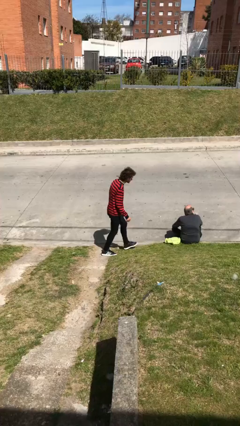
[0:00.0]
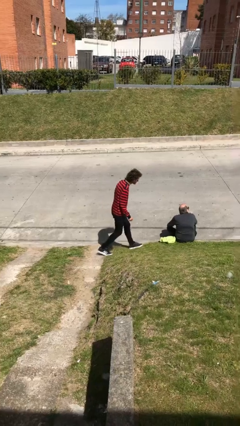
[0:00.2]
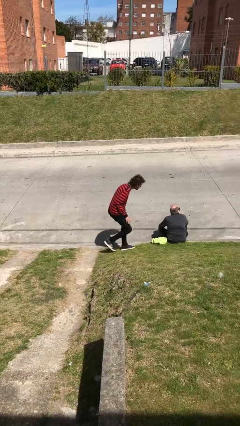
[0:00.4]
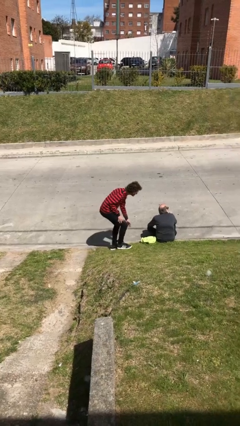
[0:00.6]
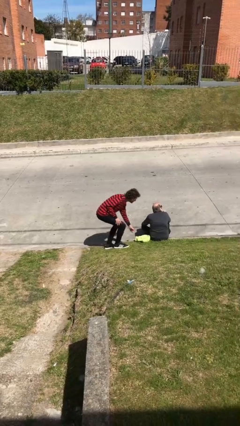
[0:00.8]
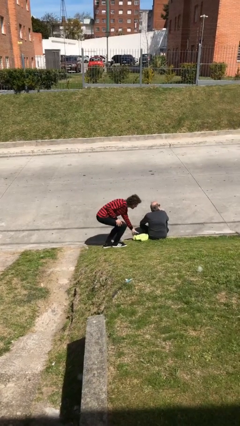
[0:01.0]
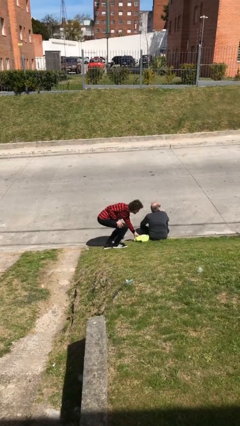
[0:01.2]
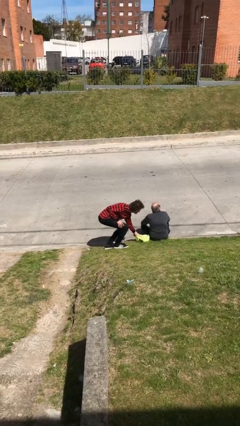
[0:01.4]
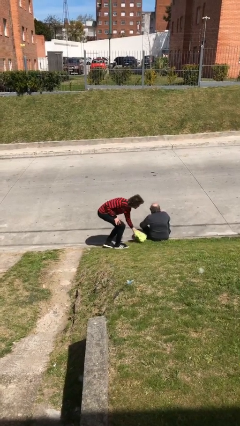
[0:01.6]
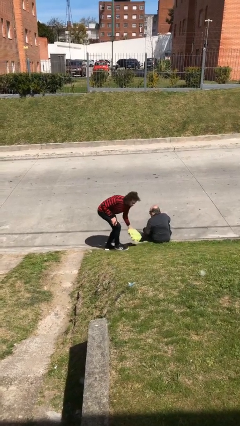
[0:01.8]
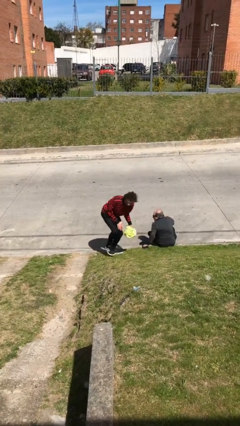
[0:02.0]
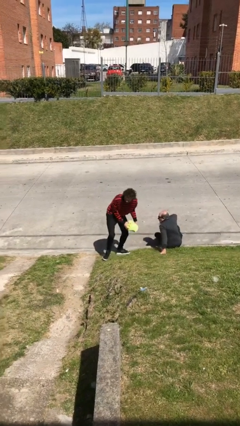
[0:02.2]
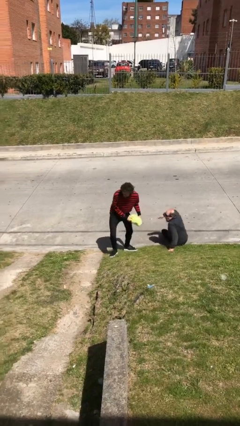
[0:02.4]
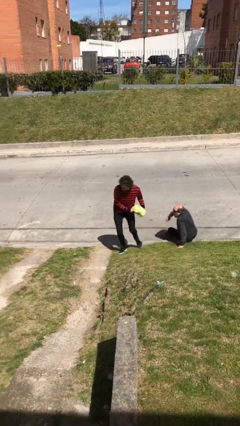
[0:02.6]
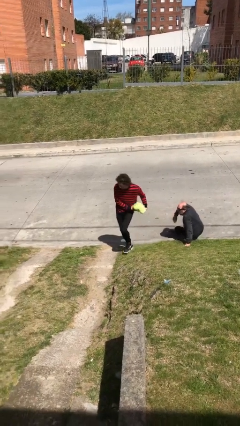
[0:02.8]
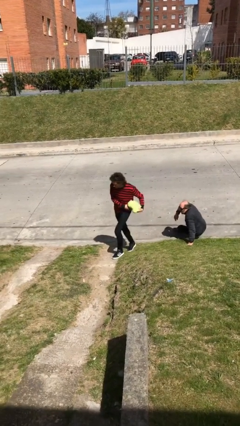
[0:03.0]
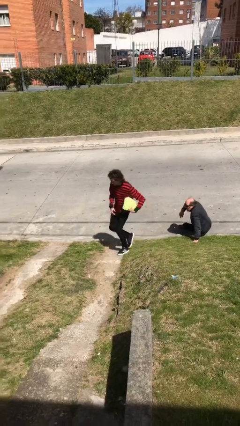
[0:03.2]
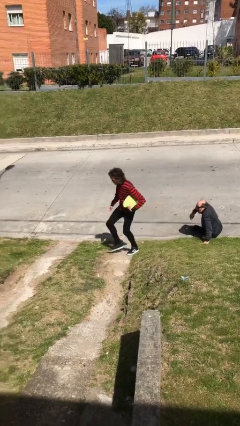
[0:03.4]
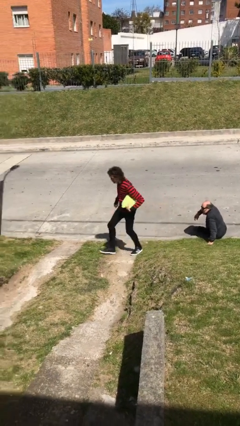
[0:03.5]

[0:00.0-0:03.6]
person steals object from person

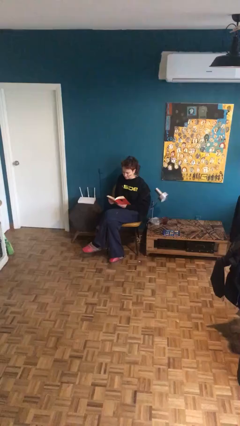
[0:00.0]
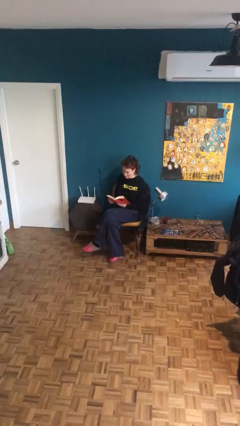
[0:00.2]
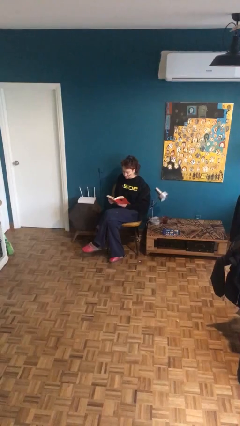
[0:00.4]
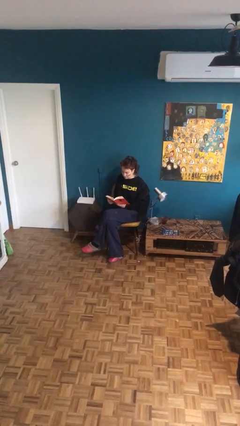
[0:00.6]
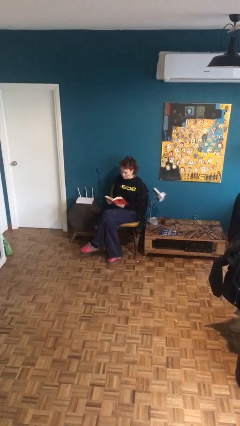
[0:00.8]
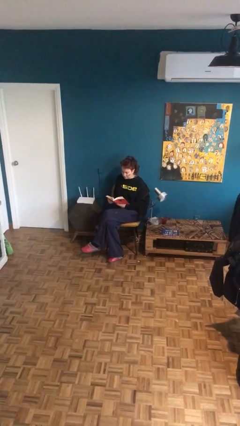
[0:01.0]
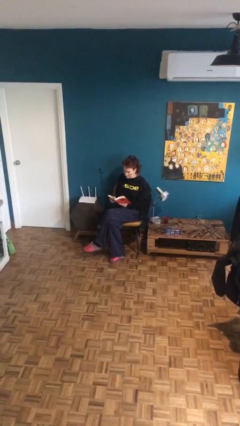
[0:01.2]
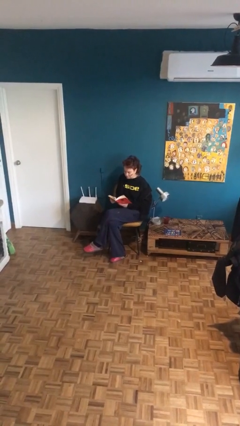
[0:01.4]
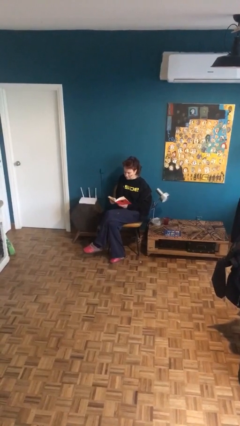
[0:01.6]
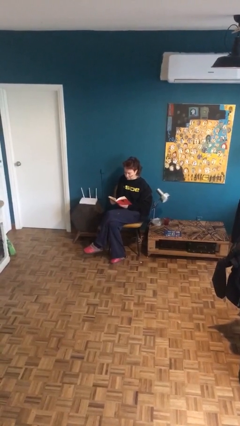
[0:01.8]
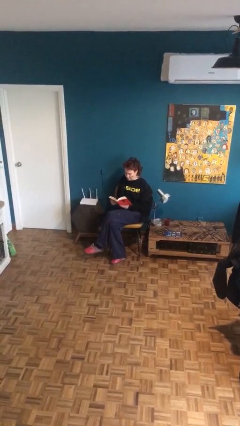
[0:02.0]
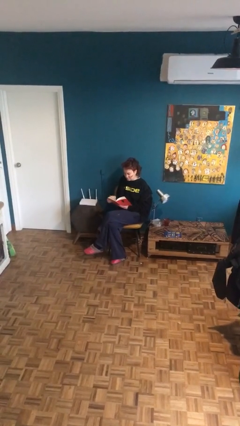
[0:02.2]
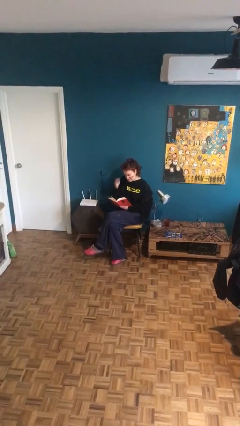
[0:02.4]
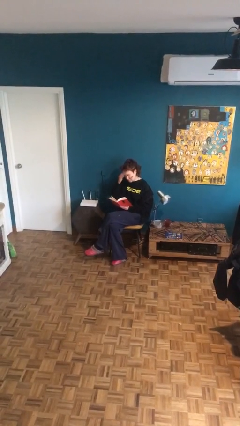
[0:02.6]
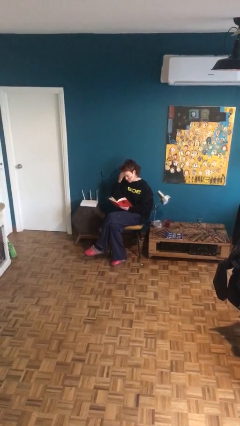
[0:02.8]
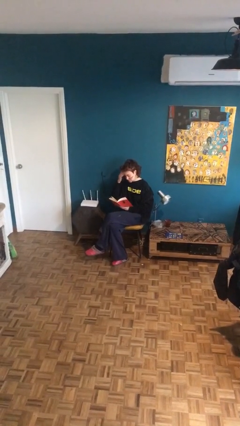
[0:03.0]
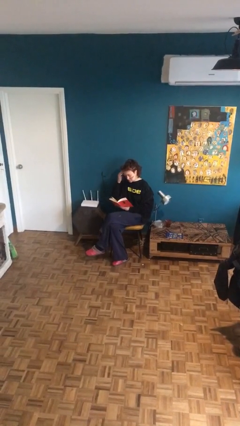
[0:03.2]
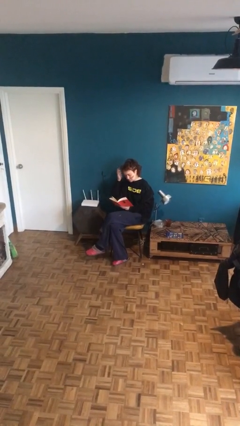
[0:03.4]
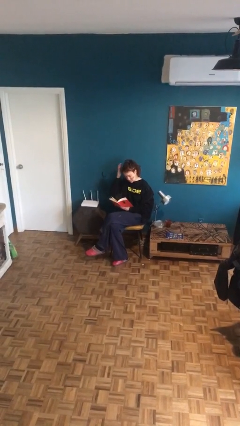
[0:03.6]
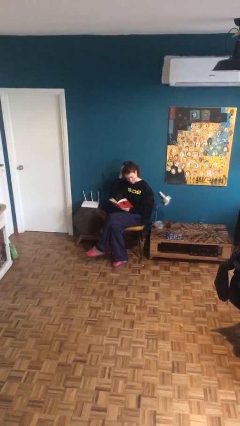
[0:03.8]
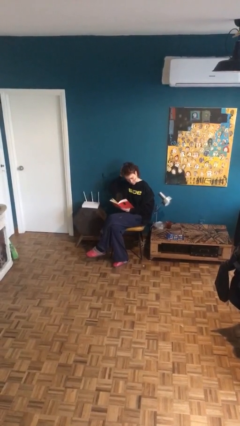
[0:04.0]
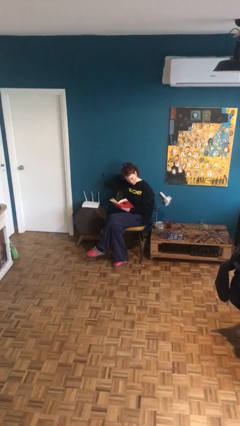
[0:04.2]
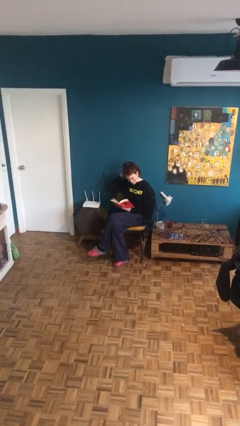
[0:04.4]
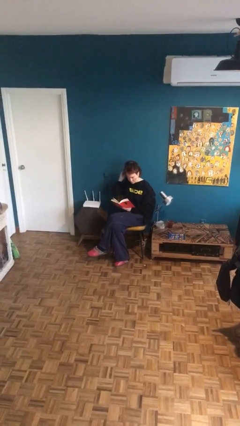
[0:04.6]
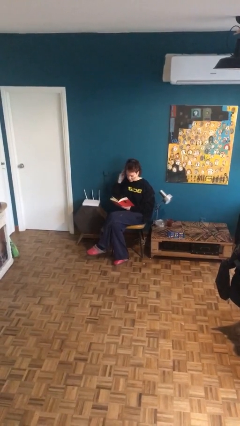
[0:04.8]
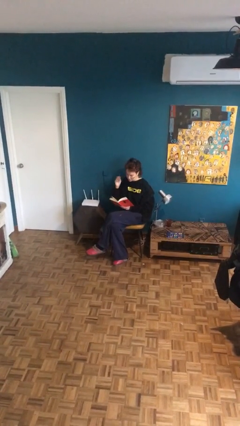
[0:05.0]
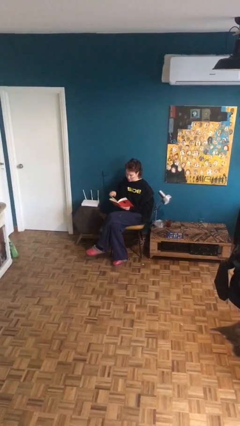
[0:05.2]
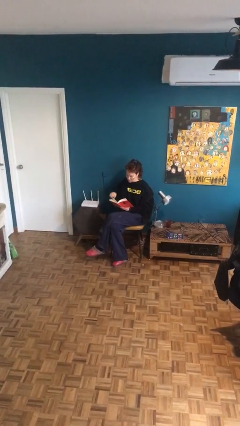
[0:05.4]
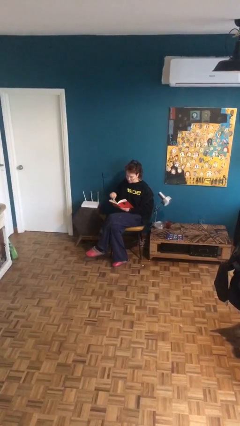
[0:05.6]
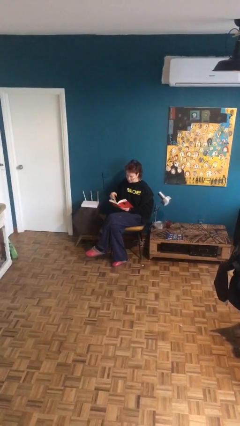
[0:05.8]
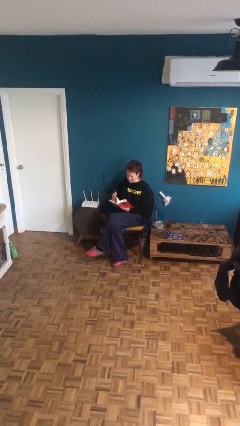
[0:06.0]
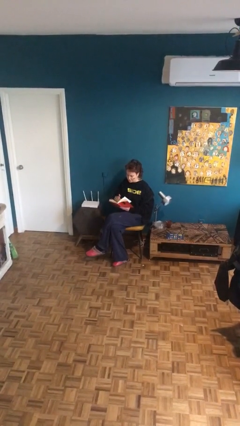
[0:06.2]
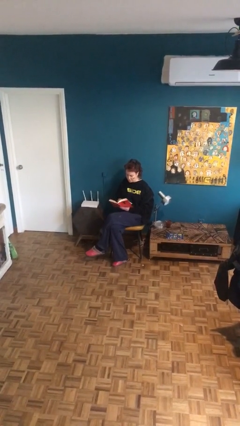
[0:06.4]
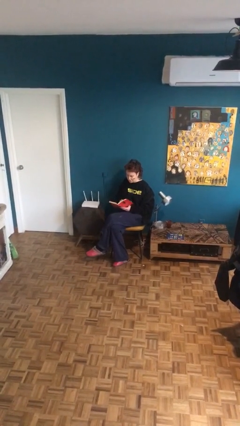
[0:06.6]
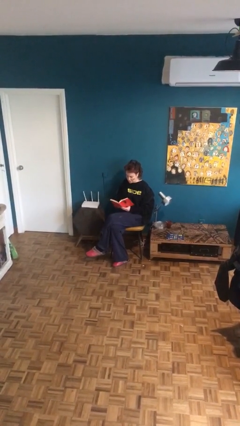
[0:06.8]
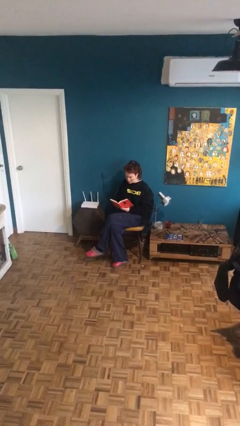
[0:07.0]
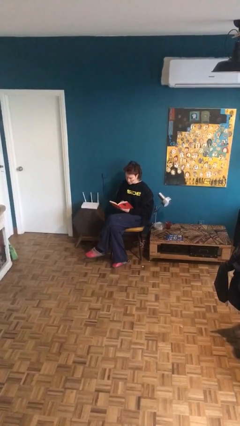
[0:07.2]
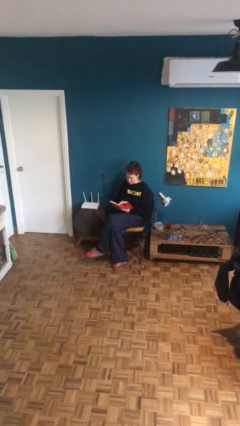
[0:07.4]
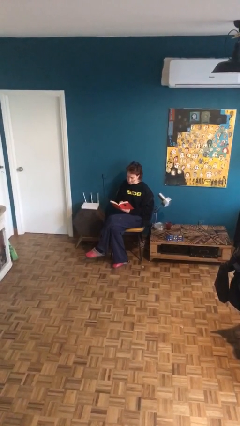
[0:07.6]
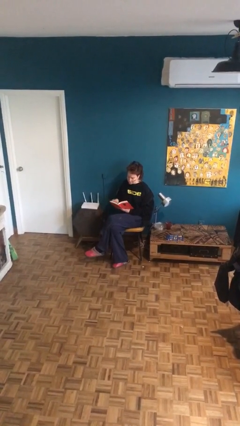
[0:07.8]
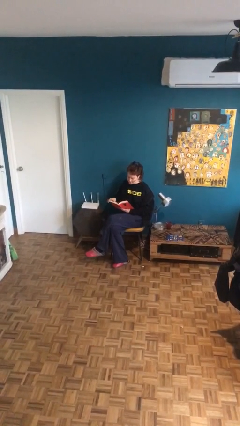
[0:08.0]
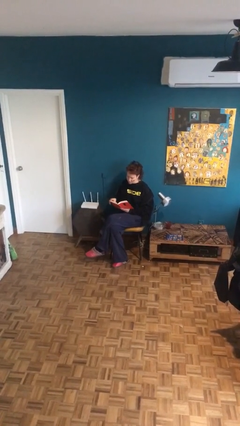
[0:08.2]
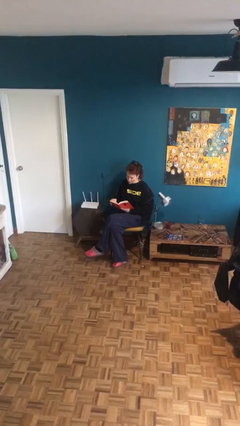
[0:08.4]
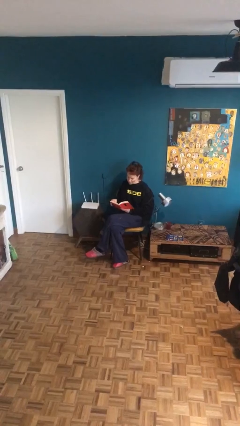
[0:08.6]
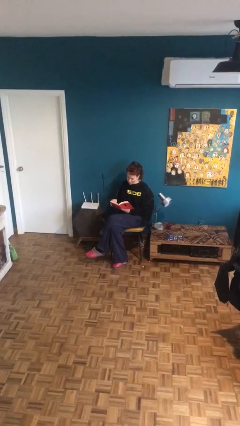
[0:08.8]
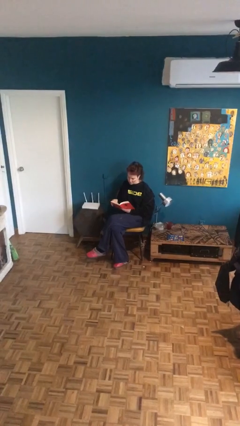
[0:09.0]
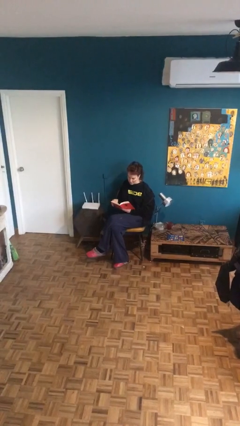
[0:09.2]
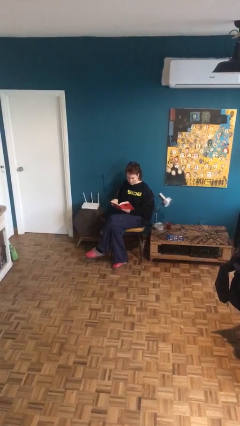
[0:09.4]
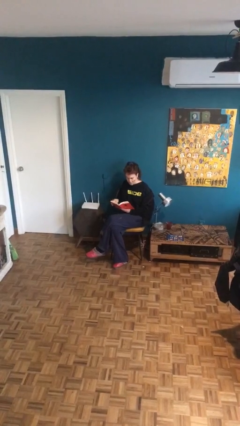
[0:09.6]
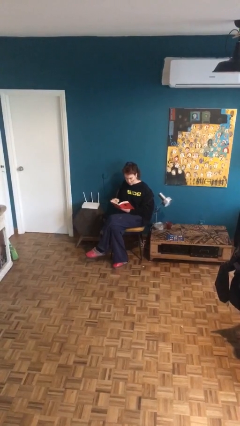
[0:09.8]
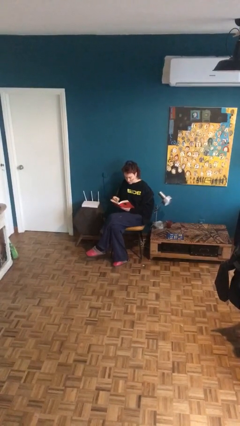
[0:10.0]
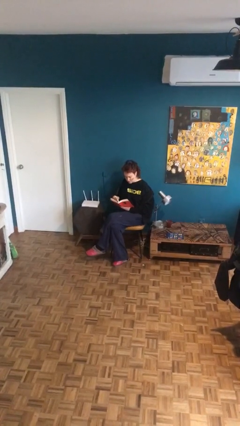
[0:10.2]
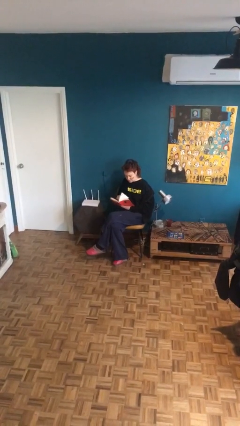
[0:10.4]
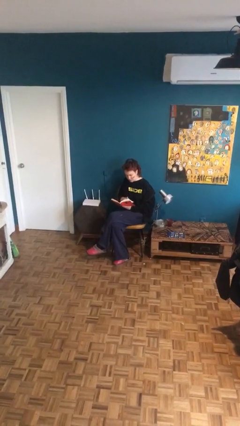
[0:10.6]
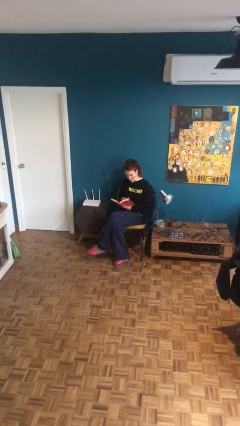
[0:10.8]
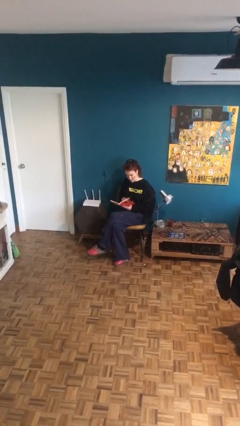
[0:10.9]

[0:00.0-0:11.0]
person reads document

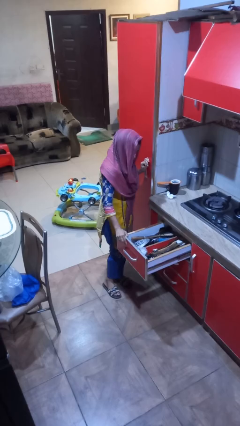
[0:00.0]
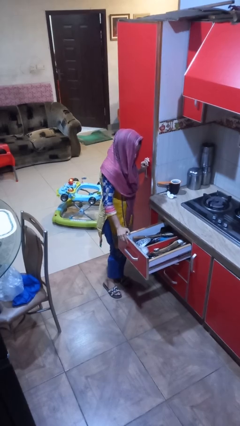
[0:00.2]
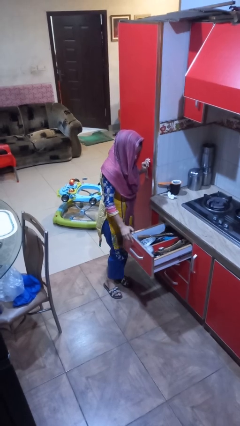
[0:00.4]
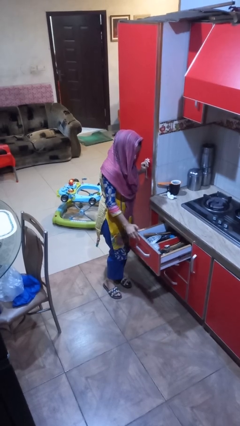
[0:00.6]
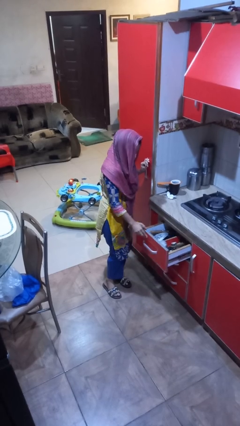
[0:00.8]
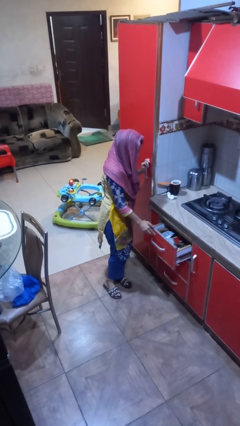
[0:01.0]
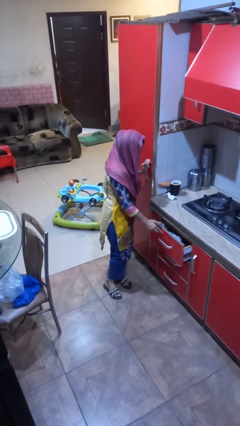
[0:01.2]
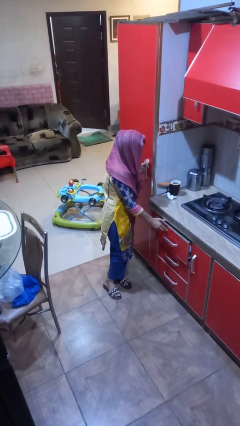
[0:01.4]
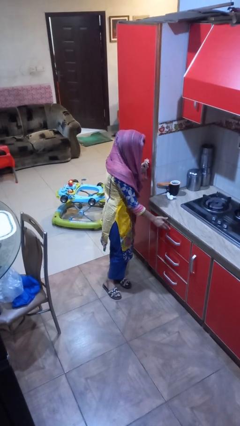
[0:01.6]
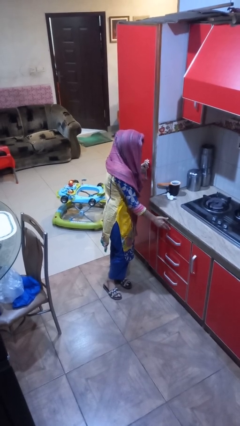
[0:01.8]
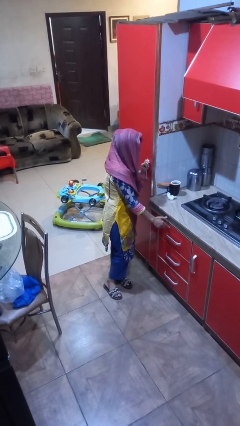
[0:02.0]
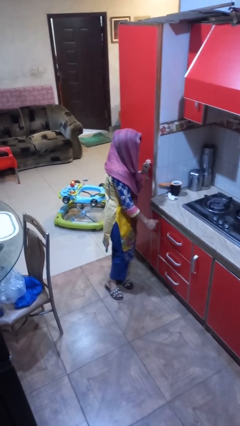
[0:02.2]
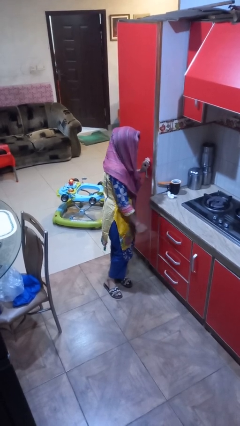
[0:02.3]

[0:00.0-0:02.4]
person closes kitchen drawer

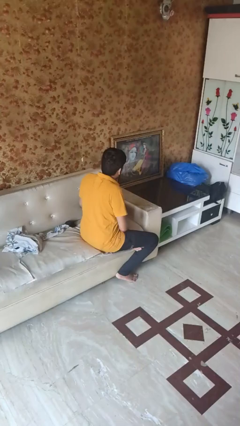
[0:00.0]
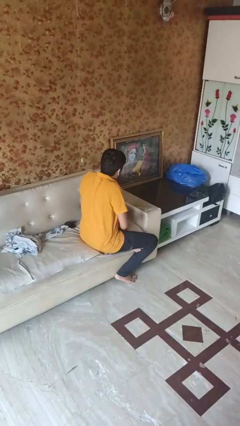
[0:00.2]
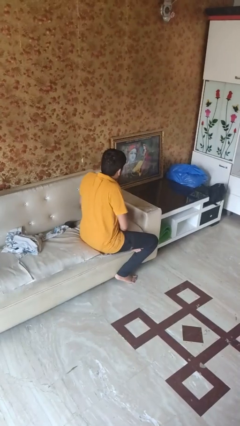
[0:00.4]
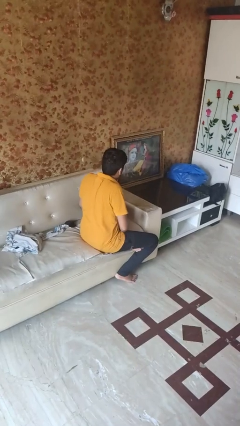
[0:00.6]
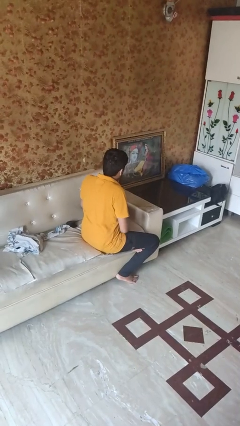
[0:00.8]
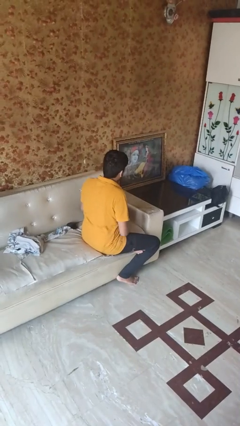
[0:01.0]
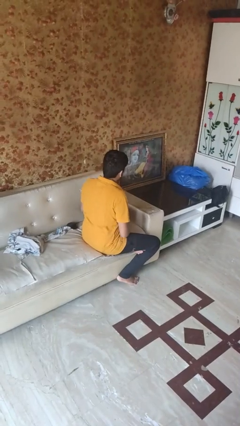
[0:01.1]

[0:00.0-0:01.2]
person shrugs
